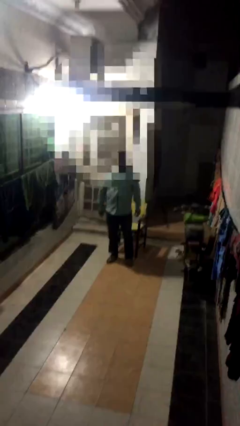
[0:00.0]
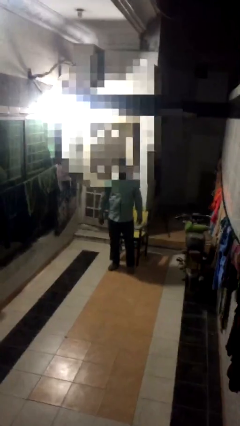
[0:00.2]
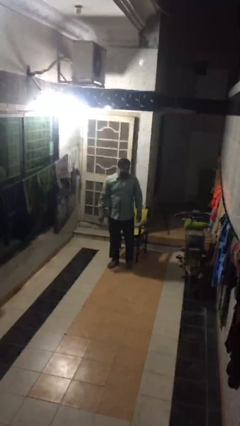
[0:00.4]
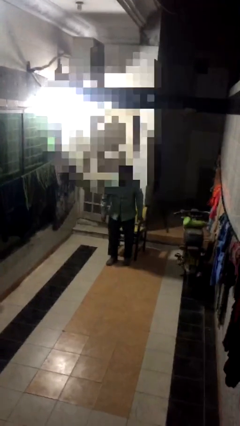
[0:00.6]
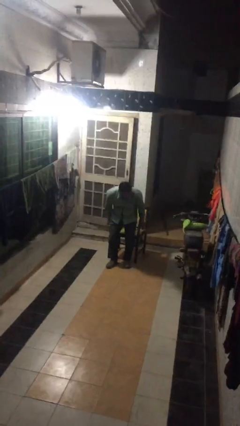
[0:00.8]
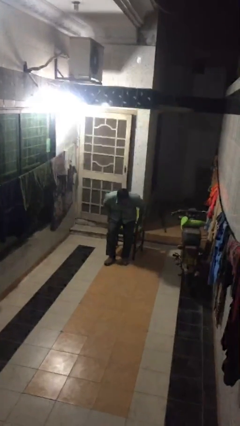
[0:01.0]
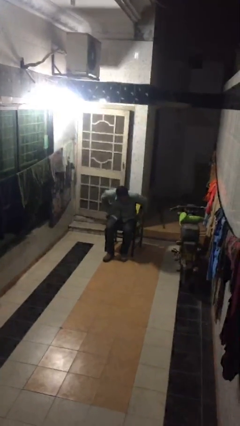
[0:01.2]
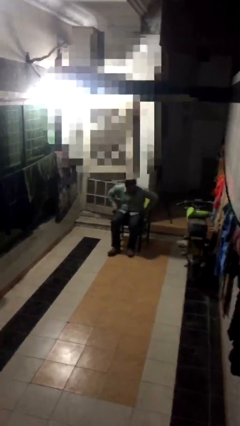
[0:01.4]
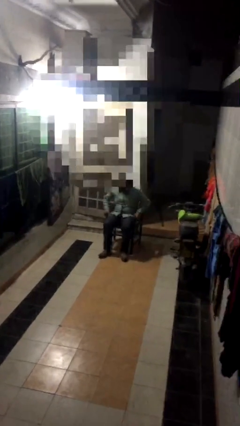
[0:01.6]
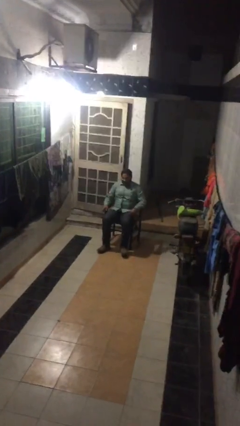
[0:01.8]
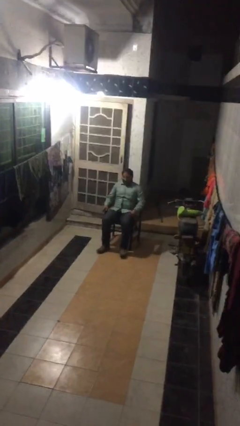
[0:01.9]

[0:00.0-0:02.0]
person sits down

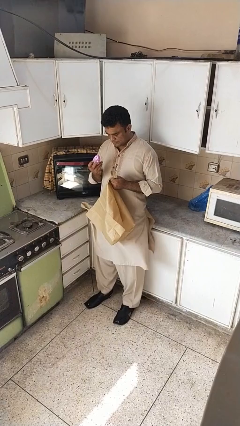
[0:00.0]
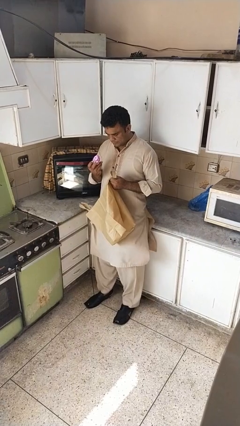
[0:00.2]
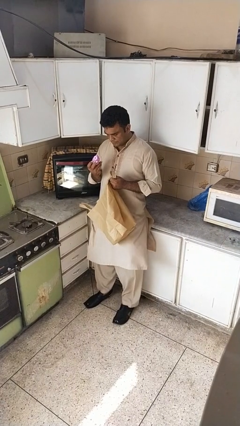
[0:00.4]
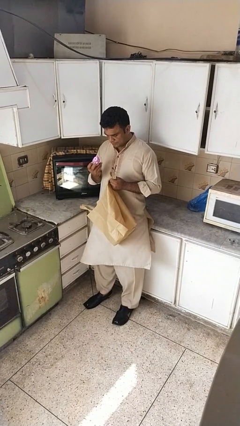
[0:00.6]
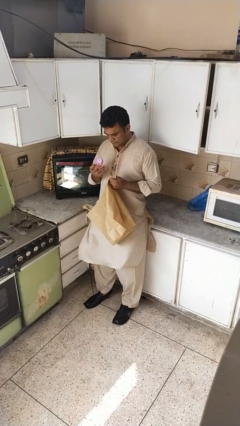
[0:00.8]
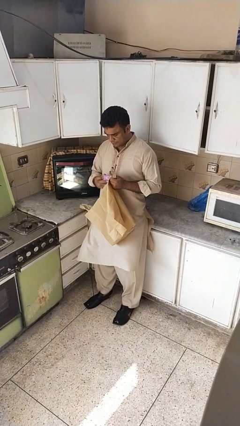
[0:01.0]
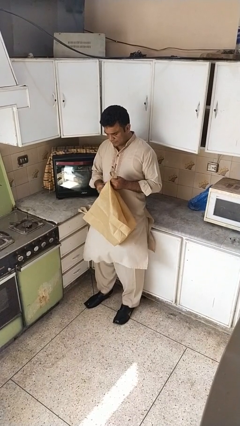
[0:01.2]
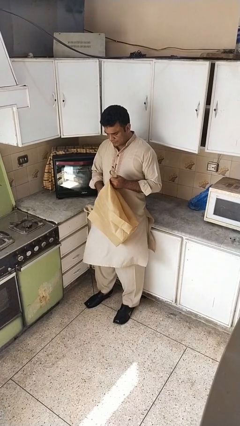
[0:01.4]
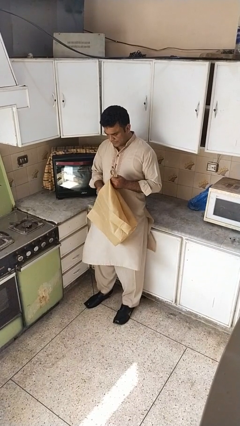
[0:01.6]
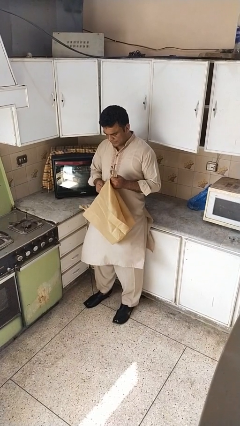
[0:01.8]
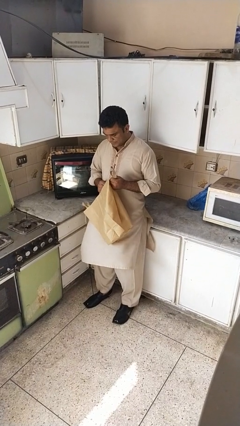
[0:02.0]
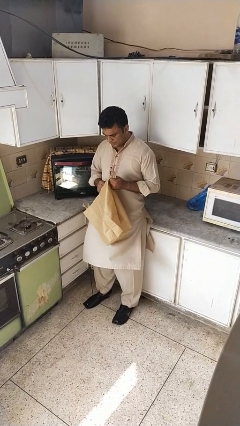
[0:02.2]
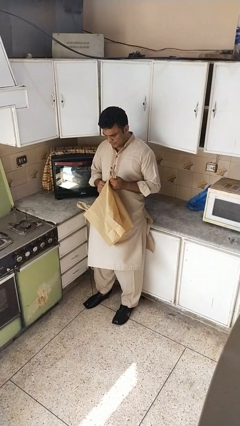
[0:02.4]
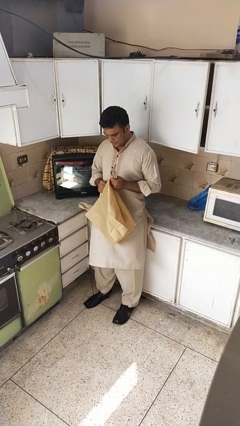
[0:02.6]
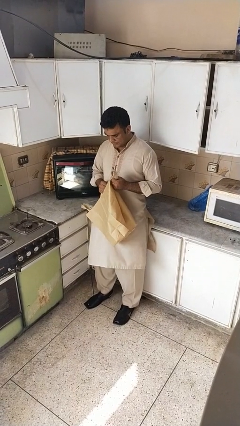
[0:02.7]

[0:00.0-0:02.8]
person puts object into bag

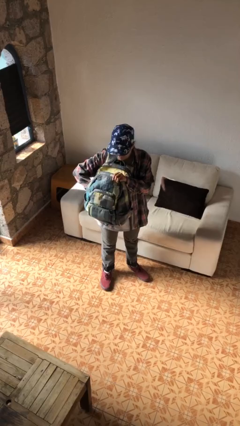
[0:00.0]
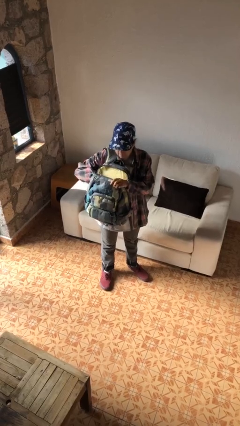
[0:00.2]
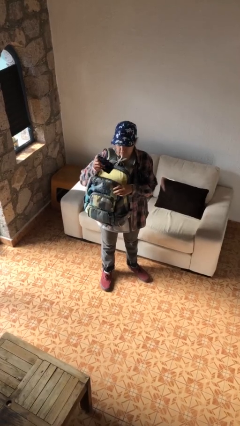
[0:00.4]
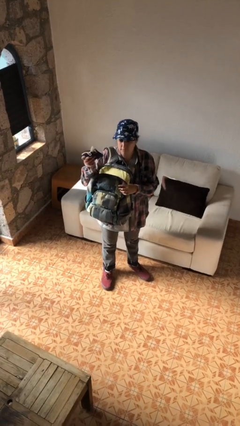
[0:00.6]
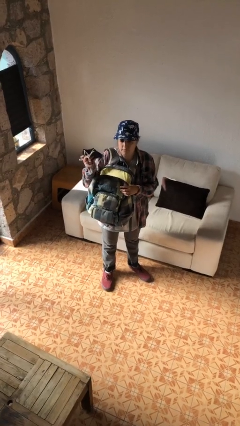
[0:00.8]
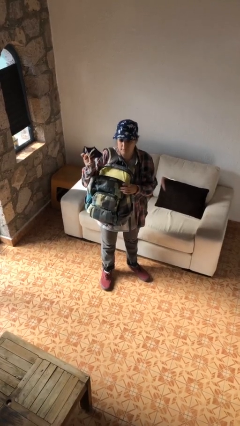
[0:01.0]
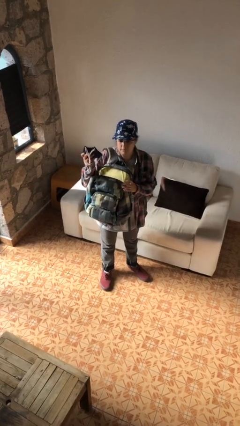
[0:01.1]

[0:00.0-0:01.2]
person takes object from backpack

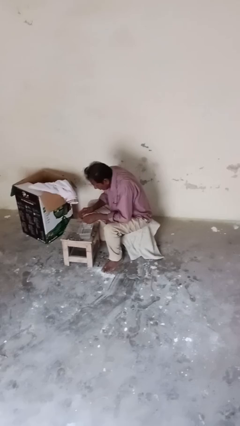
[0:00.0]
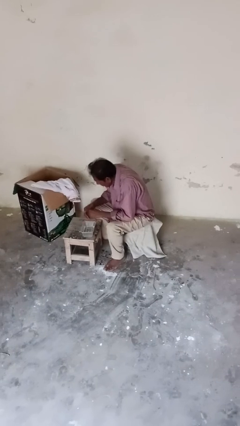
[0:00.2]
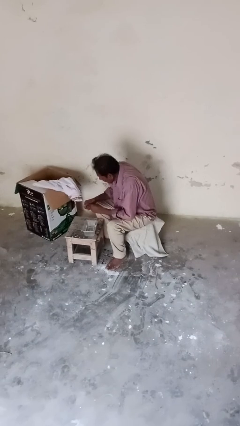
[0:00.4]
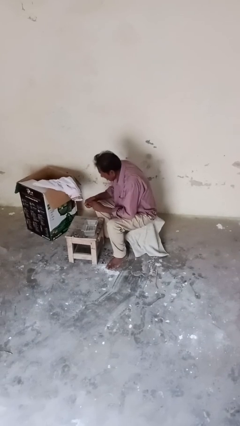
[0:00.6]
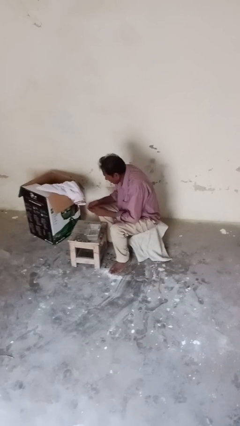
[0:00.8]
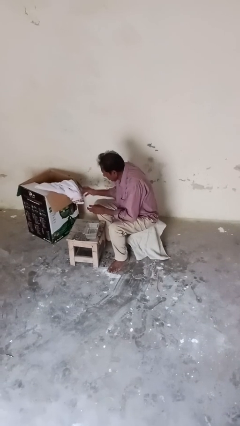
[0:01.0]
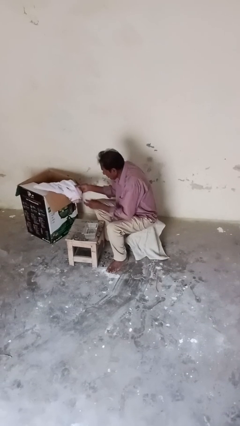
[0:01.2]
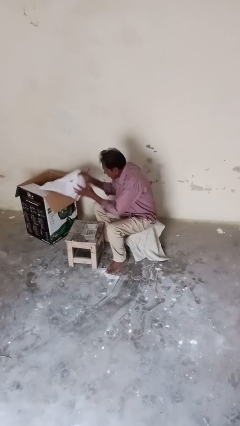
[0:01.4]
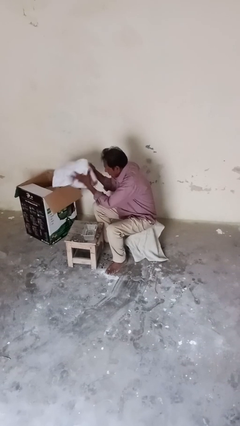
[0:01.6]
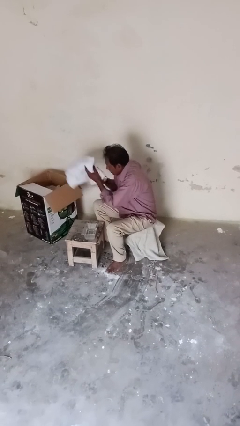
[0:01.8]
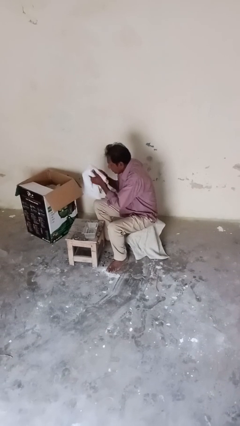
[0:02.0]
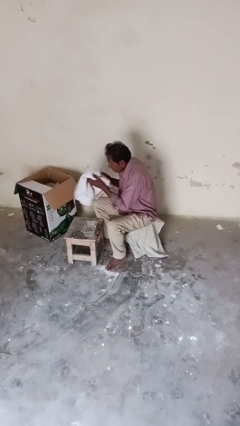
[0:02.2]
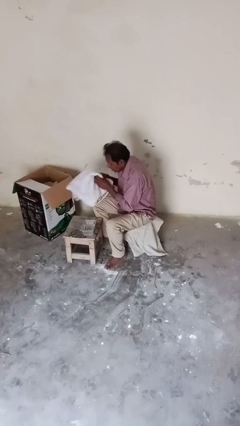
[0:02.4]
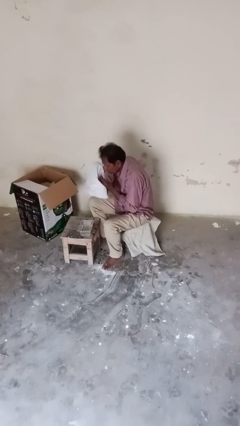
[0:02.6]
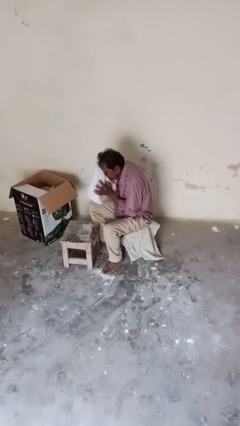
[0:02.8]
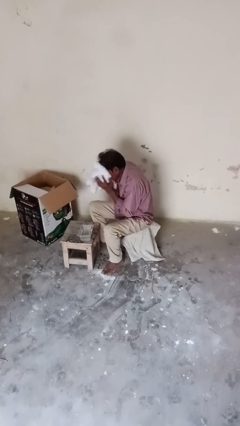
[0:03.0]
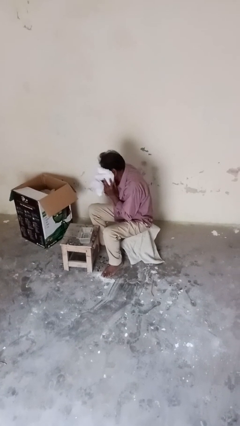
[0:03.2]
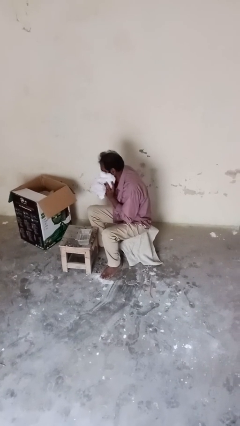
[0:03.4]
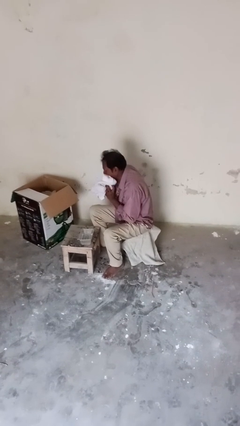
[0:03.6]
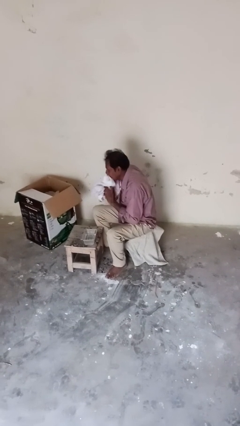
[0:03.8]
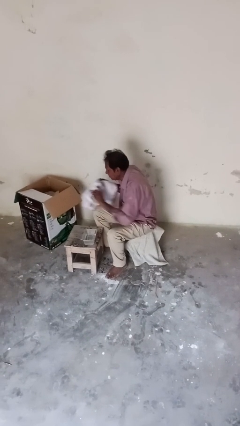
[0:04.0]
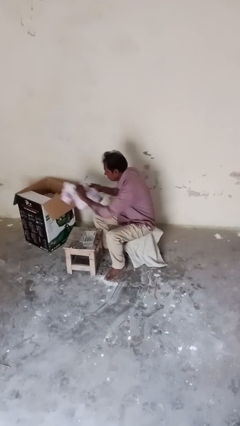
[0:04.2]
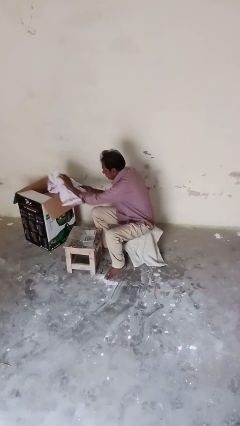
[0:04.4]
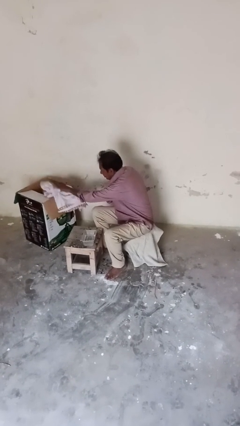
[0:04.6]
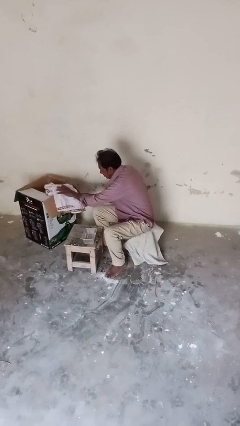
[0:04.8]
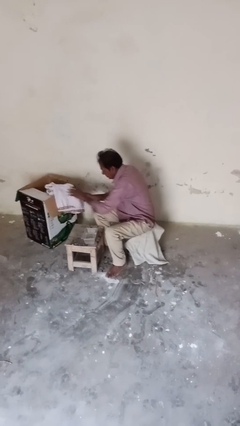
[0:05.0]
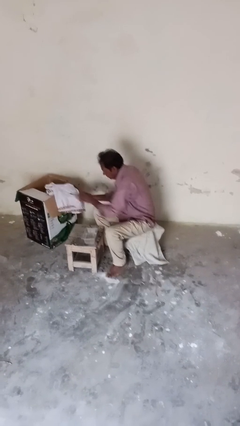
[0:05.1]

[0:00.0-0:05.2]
person dries face with towel

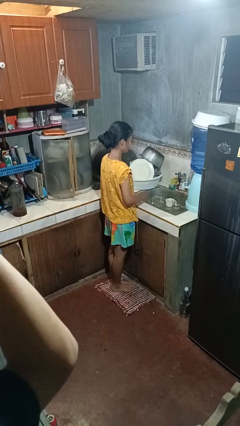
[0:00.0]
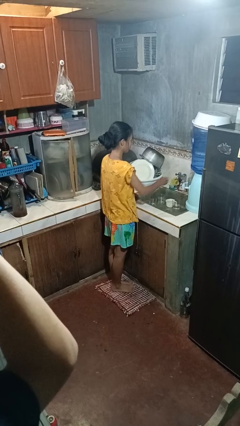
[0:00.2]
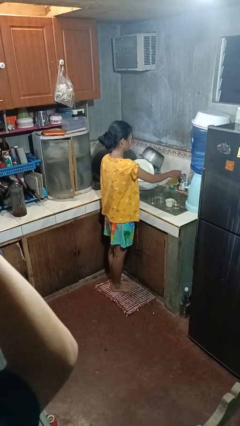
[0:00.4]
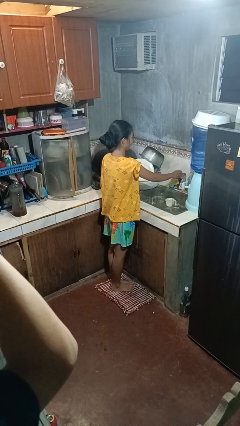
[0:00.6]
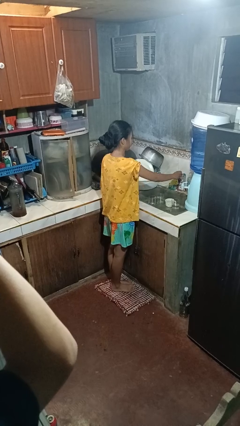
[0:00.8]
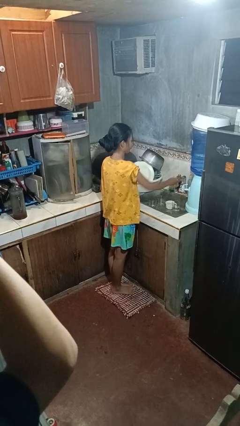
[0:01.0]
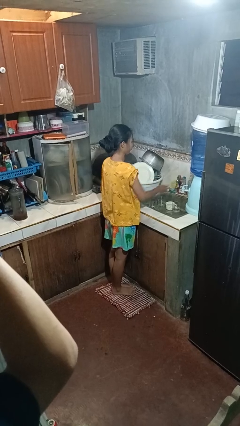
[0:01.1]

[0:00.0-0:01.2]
person turns on faucet

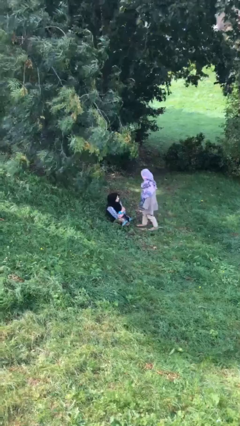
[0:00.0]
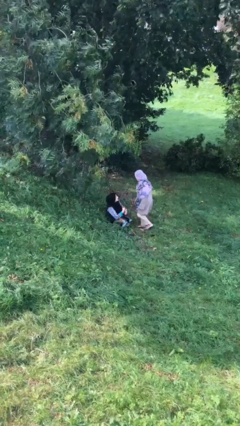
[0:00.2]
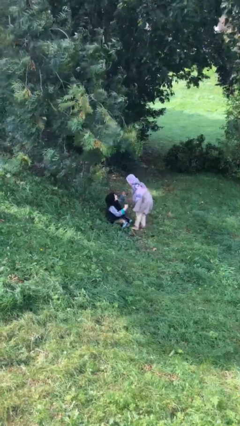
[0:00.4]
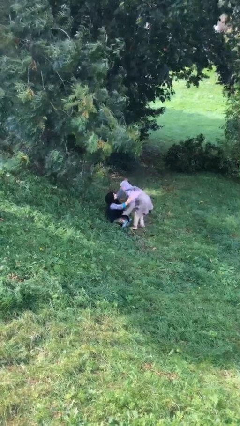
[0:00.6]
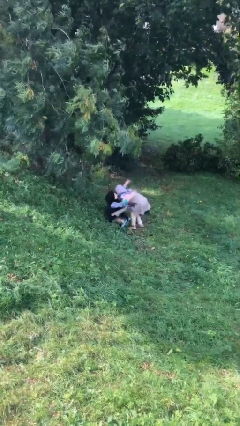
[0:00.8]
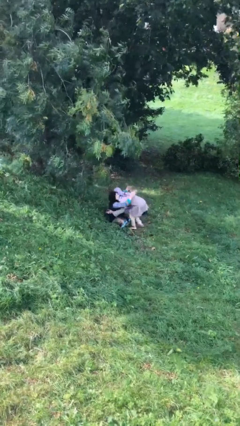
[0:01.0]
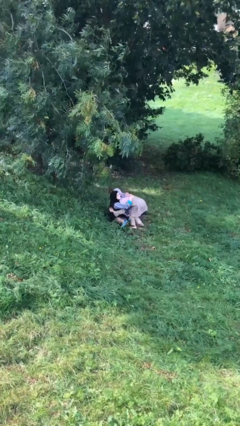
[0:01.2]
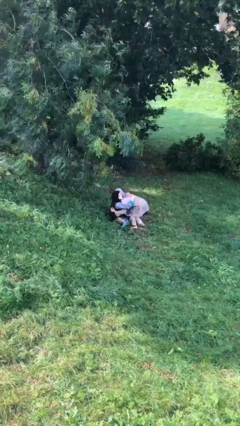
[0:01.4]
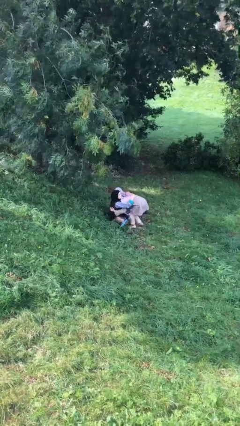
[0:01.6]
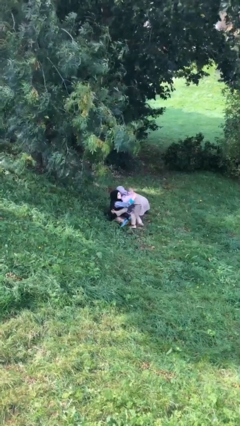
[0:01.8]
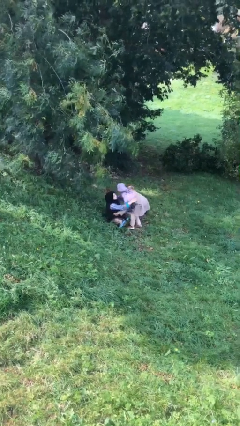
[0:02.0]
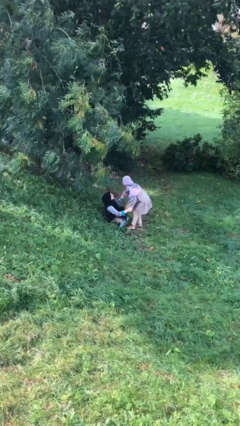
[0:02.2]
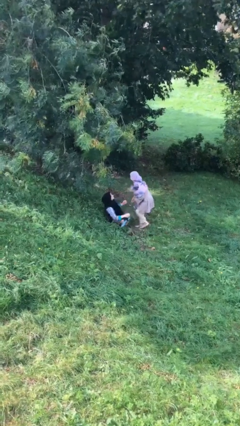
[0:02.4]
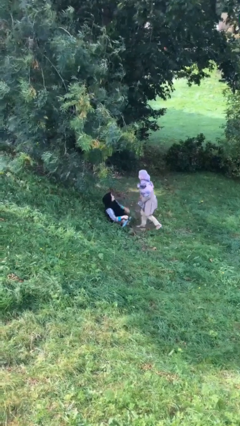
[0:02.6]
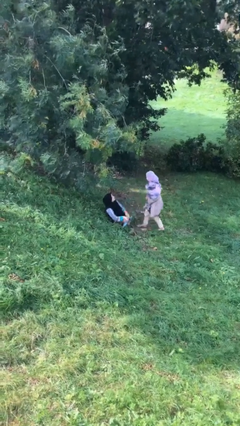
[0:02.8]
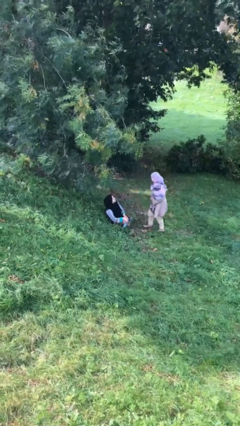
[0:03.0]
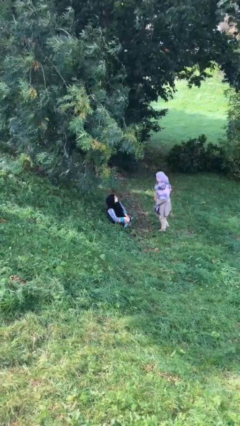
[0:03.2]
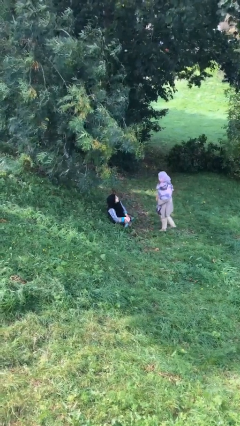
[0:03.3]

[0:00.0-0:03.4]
person embraces person

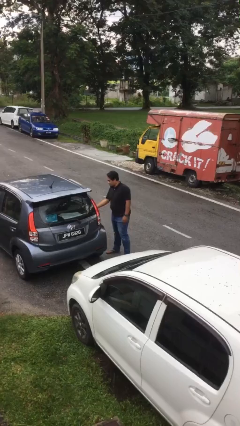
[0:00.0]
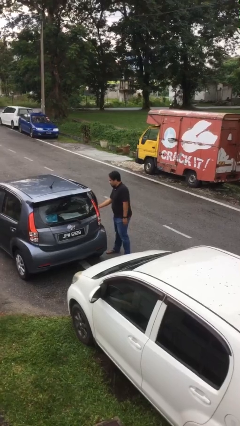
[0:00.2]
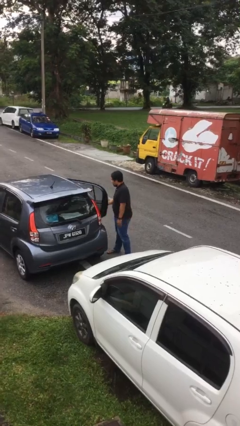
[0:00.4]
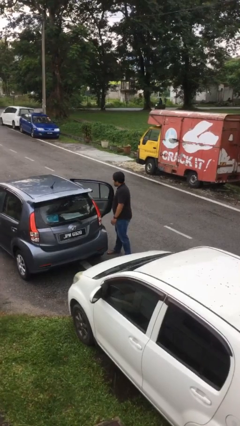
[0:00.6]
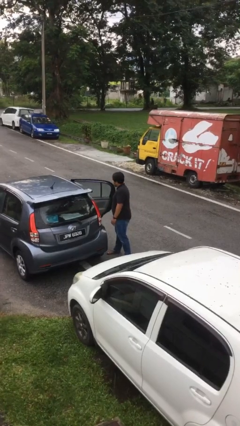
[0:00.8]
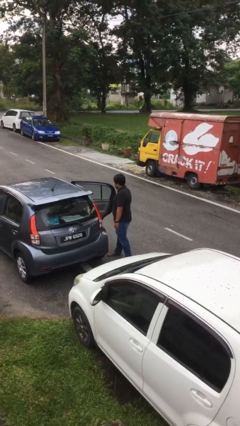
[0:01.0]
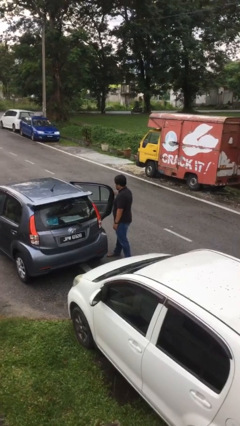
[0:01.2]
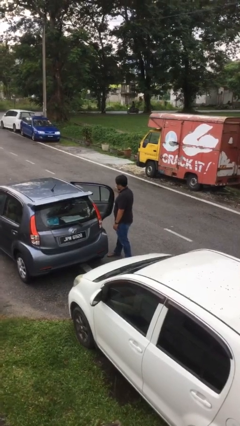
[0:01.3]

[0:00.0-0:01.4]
person opens car door
